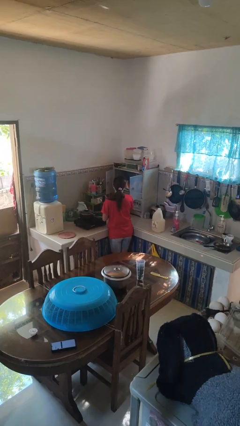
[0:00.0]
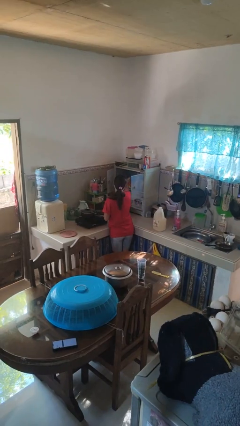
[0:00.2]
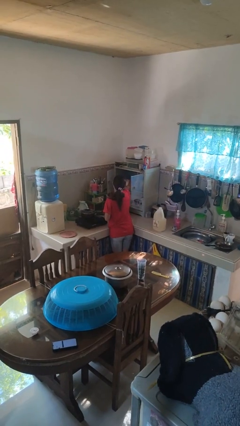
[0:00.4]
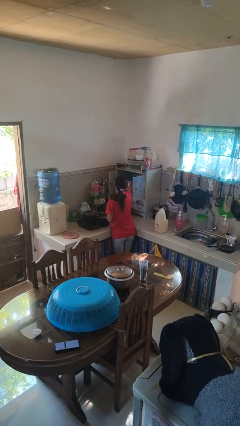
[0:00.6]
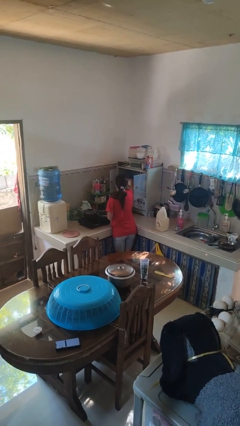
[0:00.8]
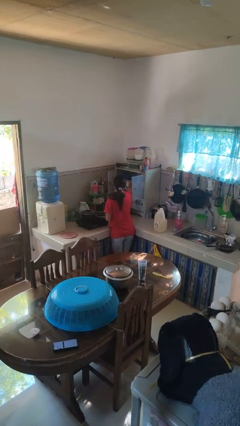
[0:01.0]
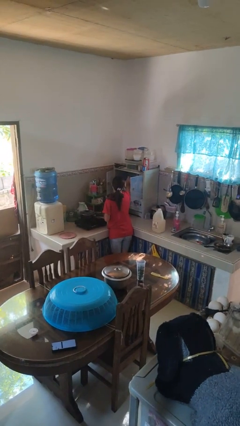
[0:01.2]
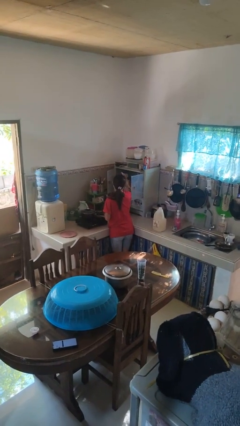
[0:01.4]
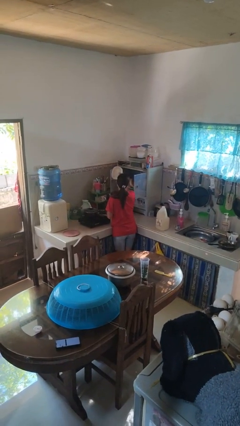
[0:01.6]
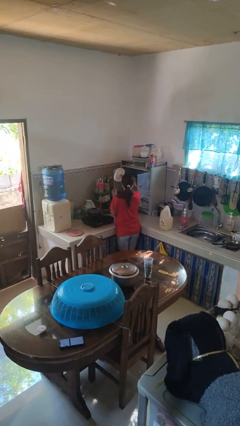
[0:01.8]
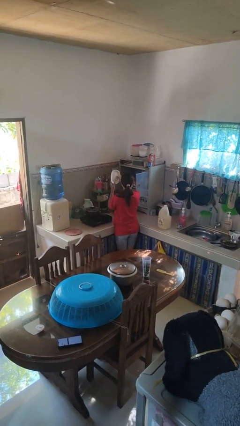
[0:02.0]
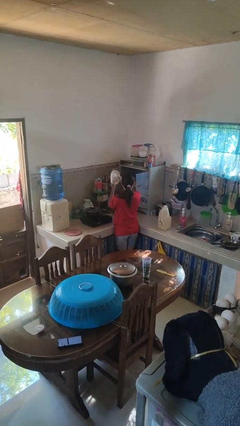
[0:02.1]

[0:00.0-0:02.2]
person takes object from cabinet

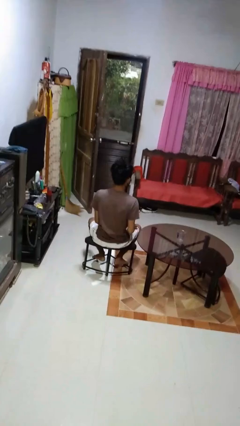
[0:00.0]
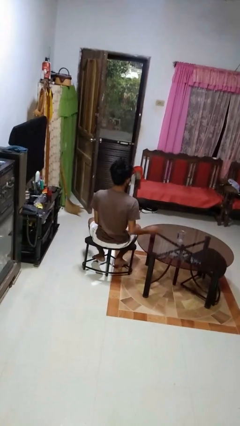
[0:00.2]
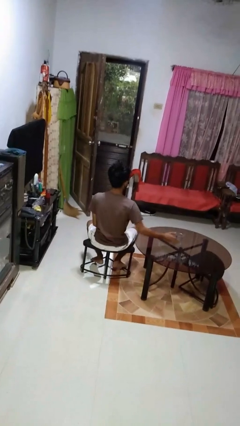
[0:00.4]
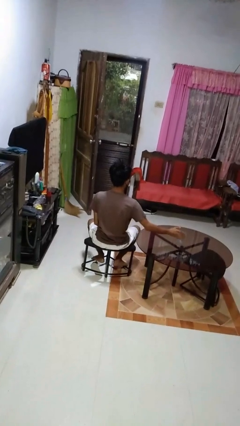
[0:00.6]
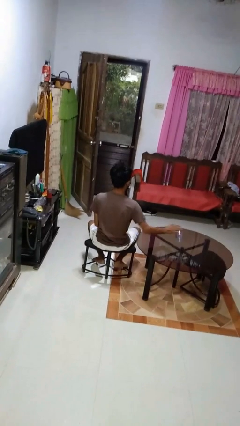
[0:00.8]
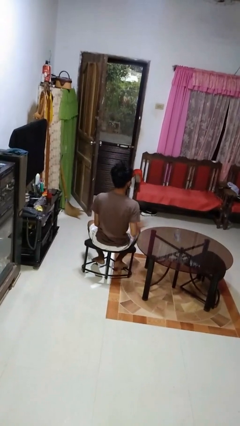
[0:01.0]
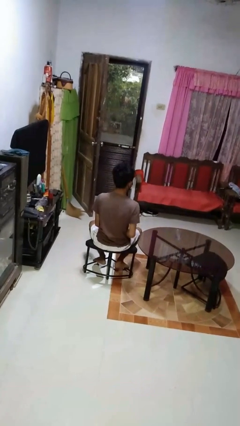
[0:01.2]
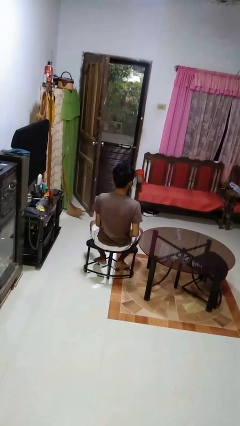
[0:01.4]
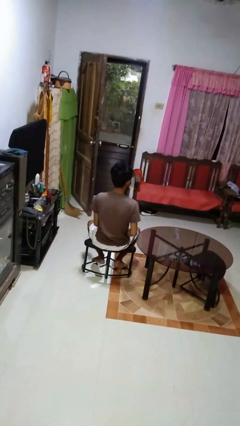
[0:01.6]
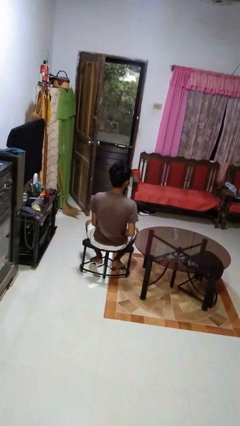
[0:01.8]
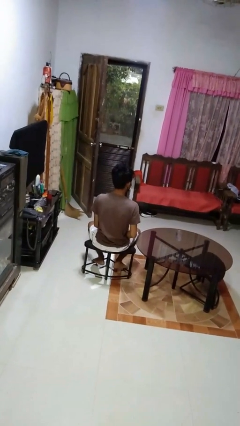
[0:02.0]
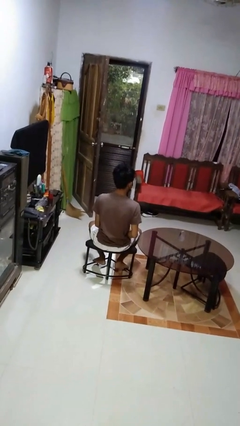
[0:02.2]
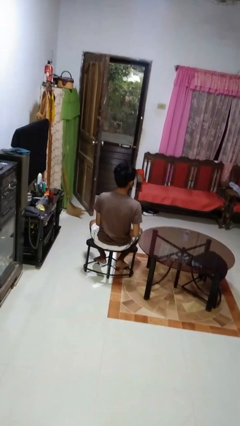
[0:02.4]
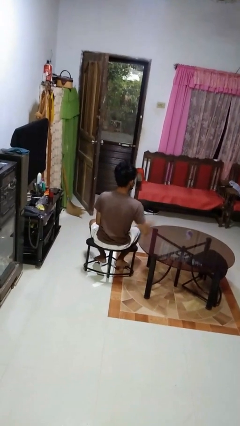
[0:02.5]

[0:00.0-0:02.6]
person knocks over glass

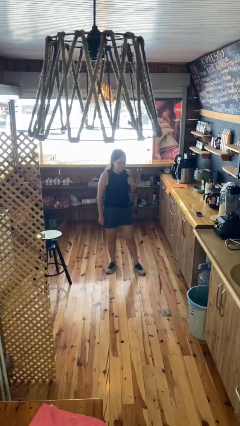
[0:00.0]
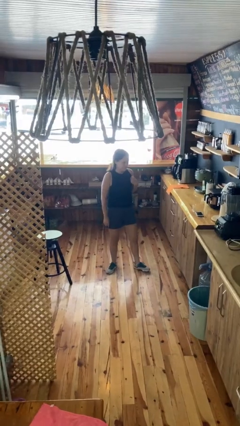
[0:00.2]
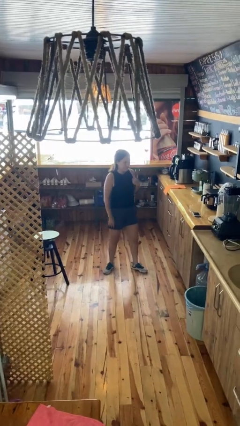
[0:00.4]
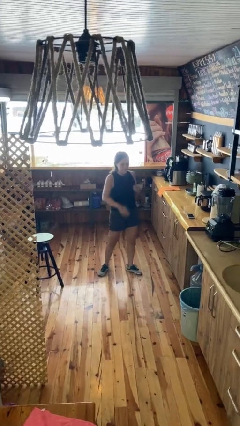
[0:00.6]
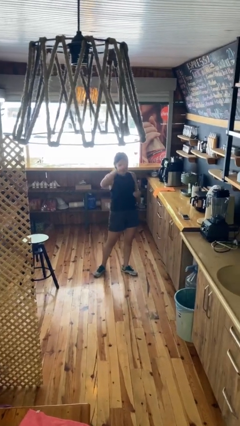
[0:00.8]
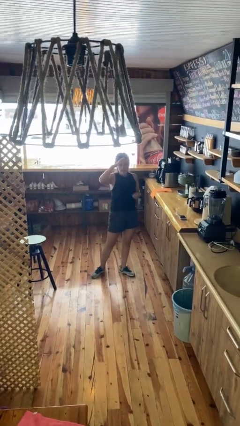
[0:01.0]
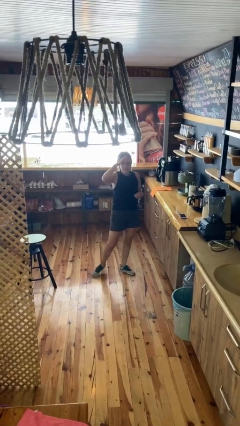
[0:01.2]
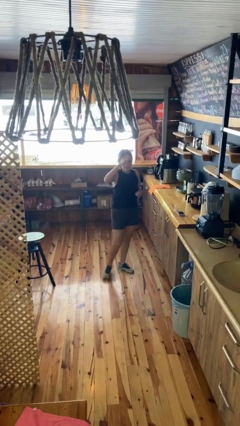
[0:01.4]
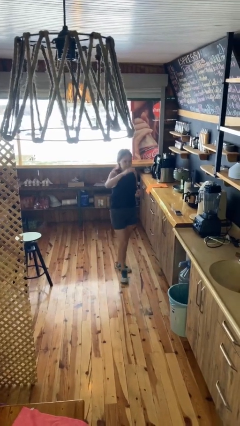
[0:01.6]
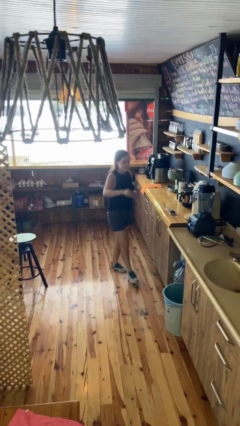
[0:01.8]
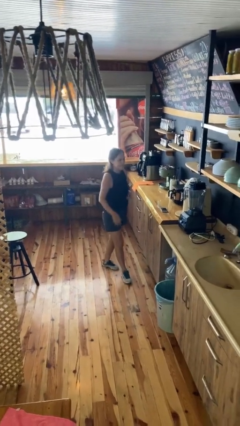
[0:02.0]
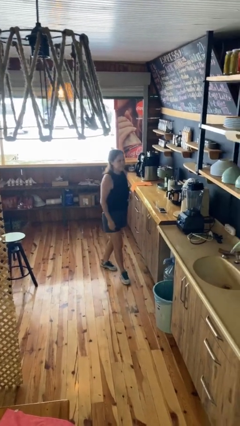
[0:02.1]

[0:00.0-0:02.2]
person salutes

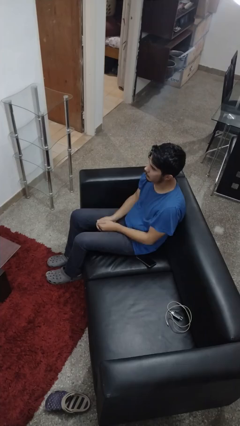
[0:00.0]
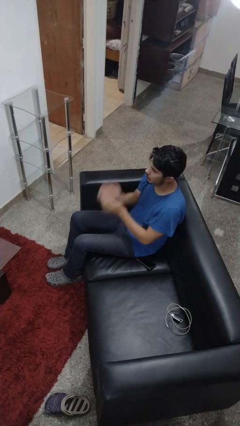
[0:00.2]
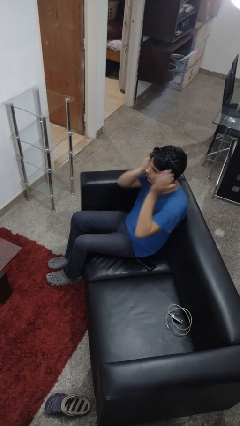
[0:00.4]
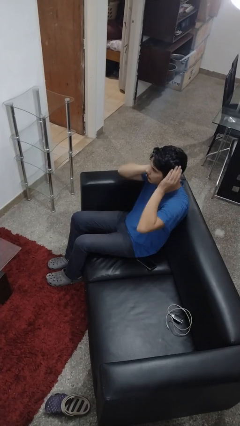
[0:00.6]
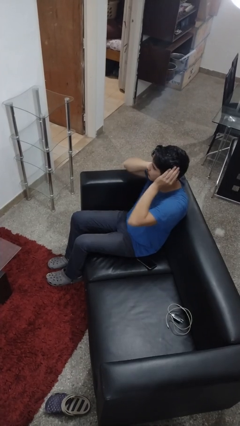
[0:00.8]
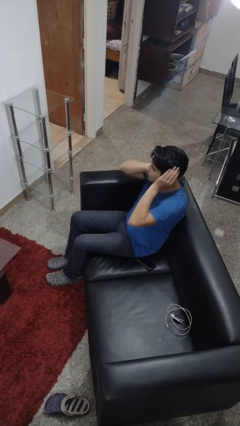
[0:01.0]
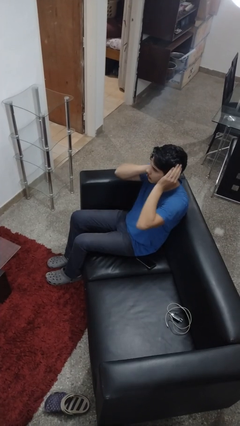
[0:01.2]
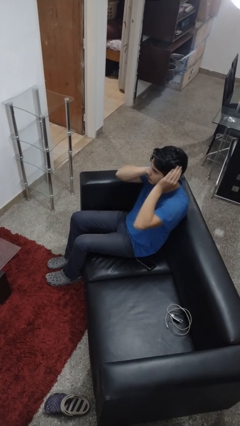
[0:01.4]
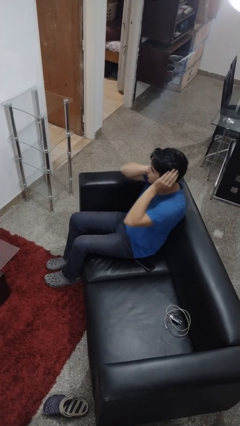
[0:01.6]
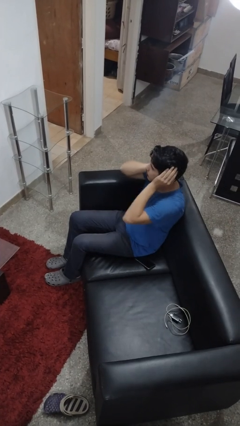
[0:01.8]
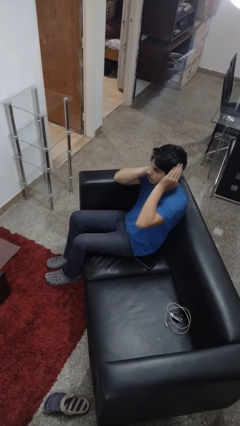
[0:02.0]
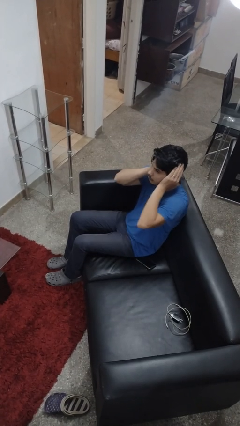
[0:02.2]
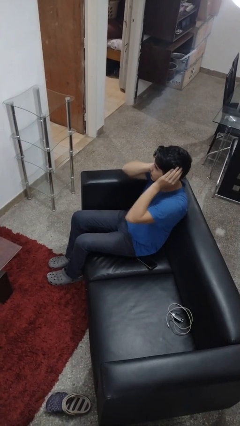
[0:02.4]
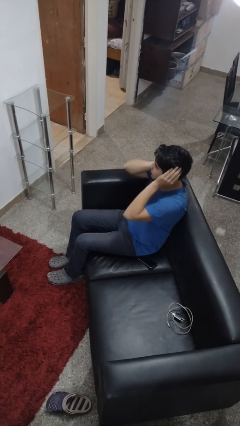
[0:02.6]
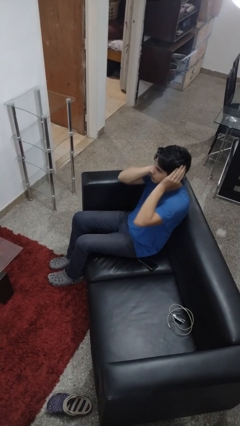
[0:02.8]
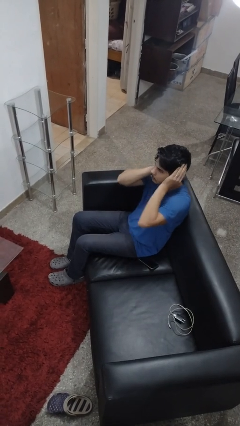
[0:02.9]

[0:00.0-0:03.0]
person puts fingers in ear

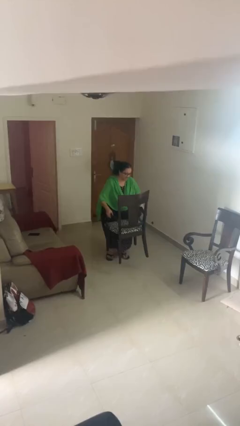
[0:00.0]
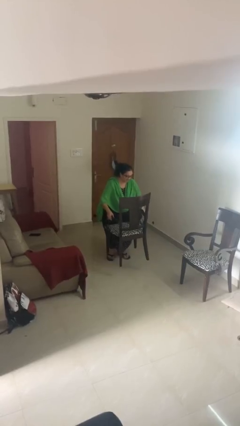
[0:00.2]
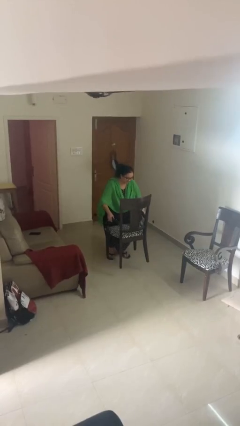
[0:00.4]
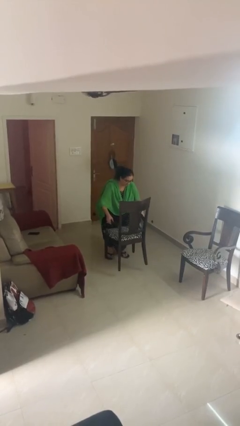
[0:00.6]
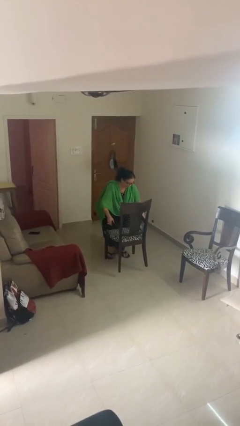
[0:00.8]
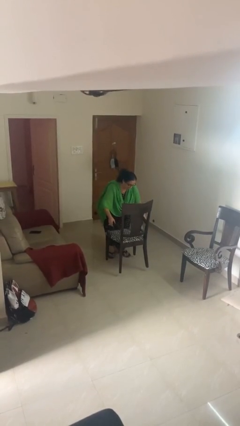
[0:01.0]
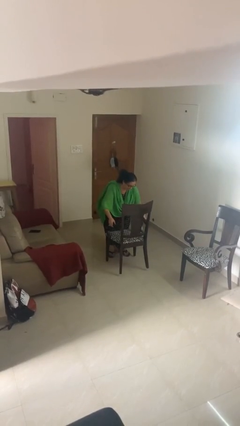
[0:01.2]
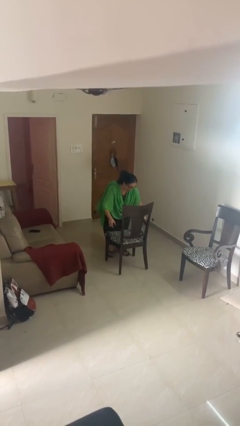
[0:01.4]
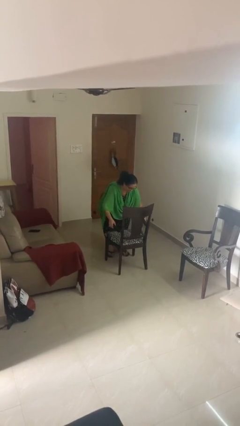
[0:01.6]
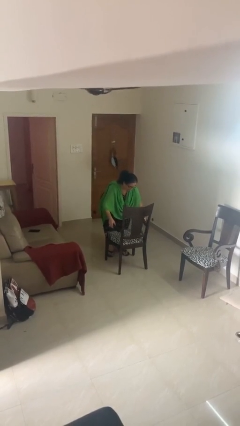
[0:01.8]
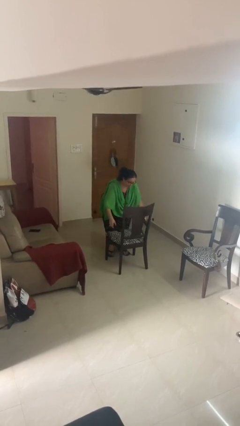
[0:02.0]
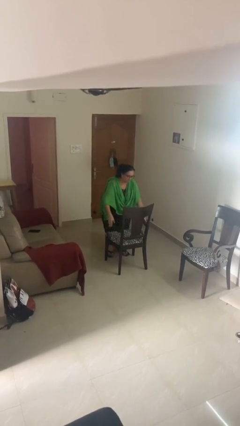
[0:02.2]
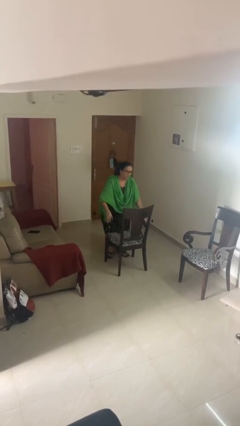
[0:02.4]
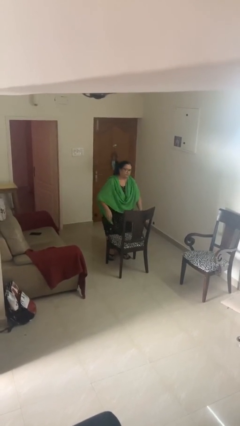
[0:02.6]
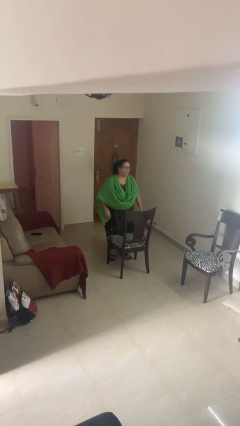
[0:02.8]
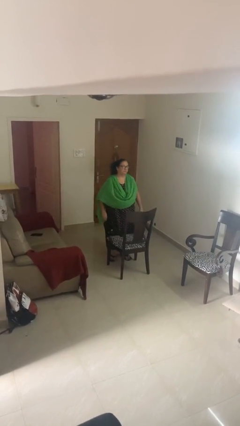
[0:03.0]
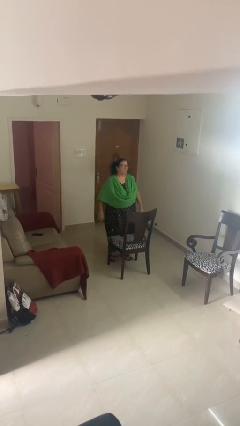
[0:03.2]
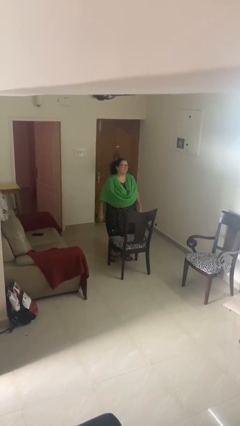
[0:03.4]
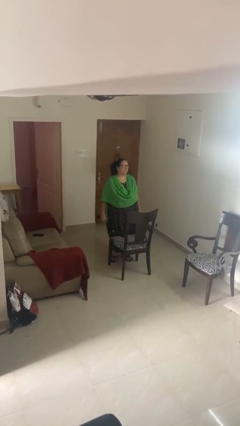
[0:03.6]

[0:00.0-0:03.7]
person puts down object on floor

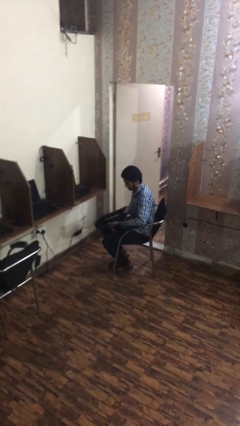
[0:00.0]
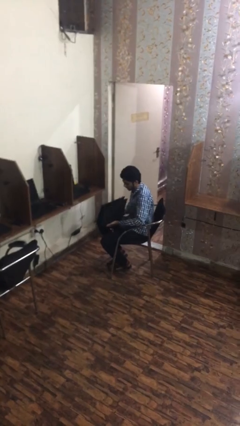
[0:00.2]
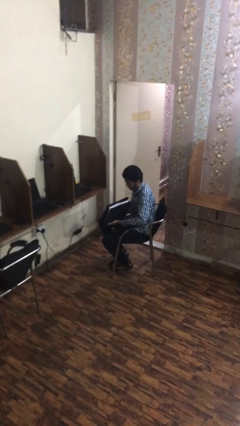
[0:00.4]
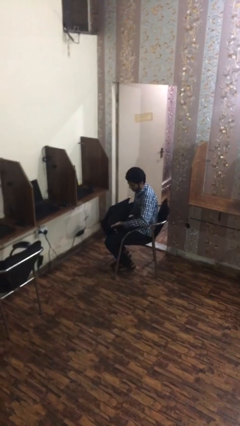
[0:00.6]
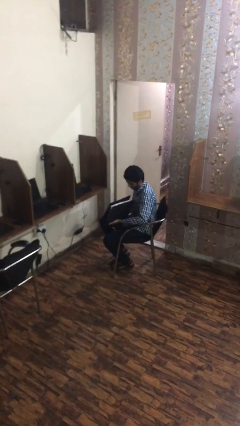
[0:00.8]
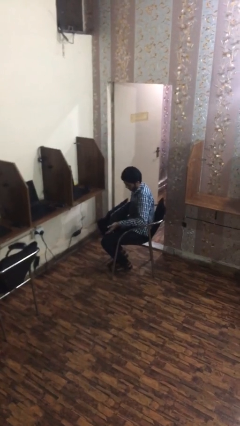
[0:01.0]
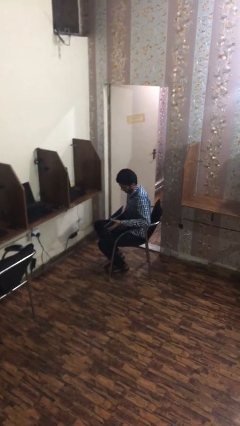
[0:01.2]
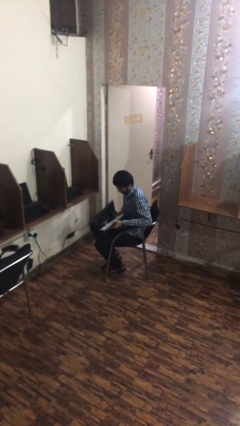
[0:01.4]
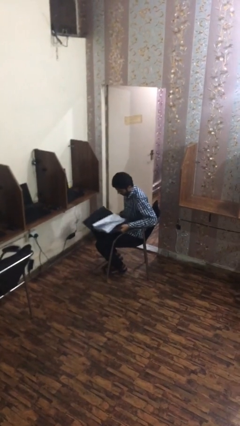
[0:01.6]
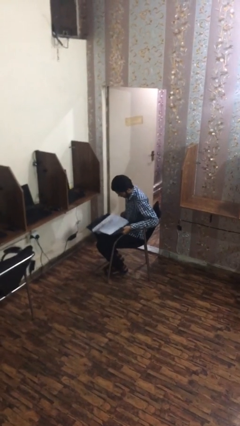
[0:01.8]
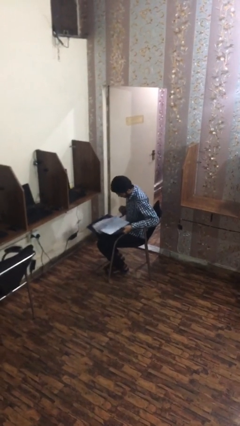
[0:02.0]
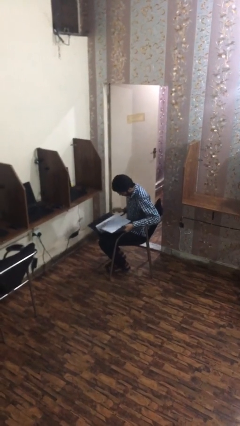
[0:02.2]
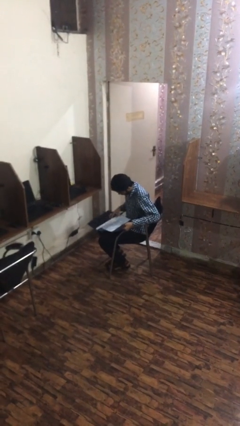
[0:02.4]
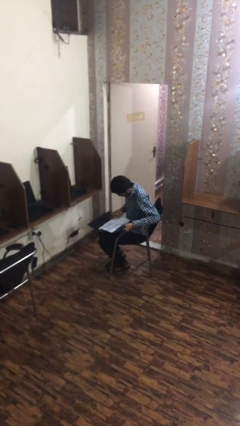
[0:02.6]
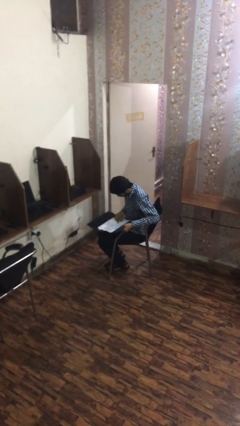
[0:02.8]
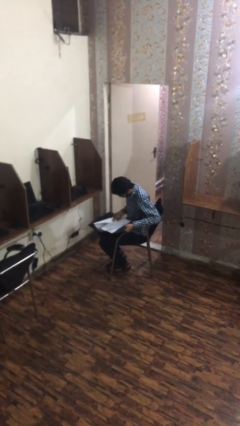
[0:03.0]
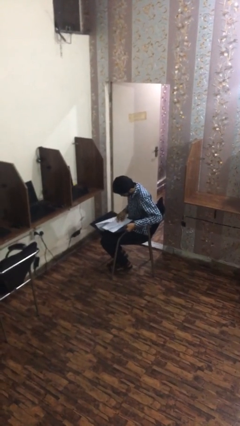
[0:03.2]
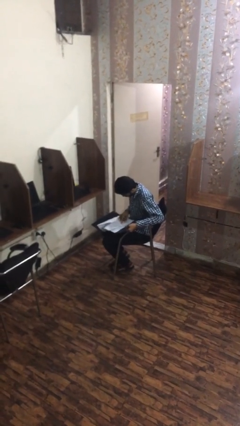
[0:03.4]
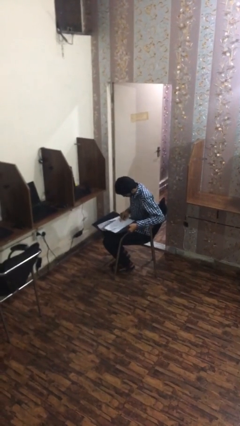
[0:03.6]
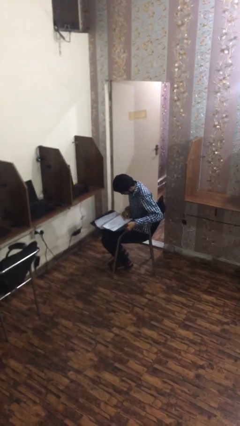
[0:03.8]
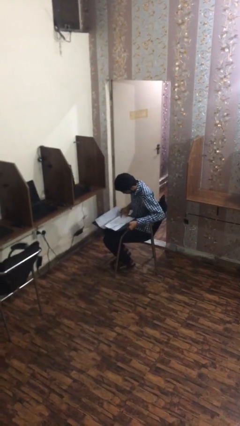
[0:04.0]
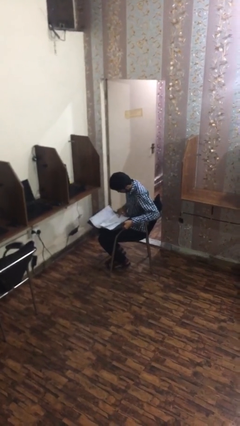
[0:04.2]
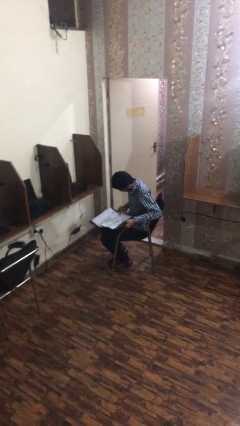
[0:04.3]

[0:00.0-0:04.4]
person reads document
